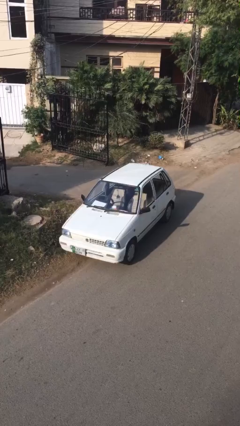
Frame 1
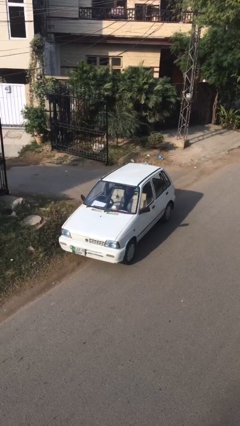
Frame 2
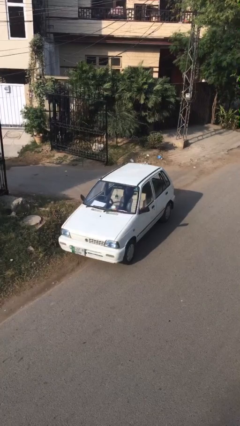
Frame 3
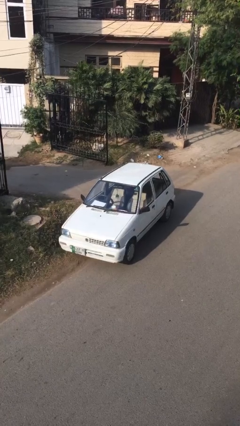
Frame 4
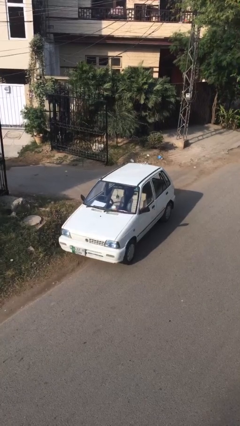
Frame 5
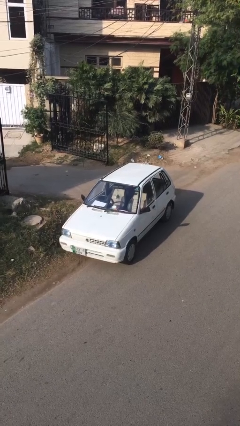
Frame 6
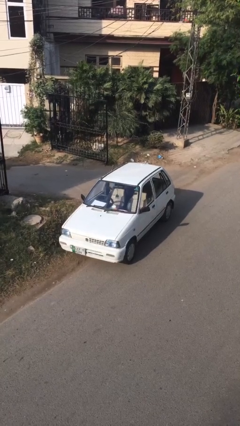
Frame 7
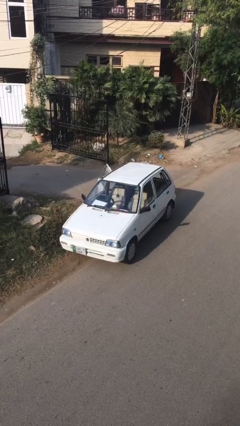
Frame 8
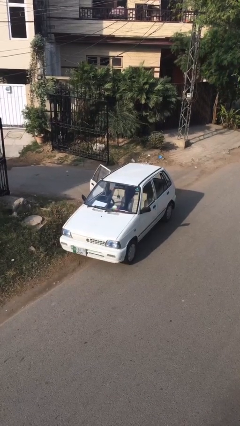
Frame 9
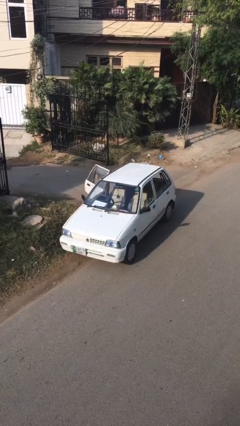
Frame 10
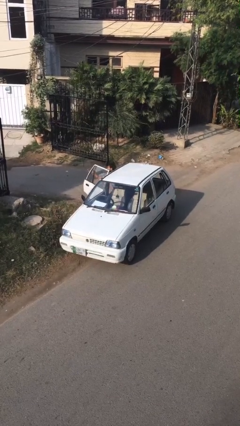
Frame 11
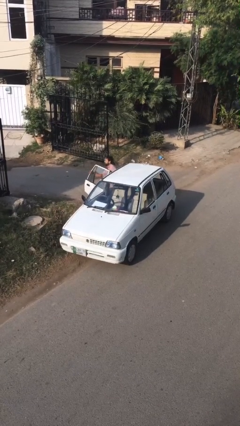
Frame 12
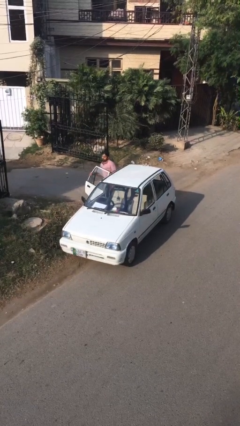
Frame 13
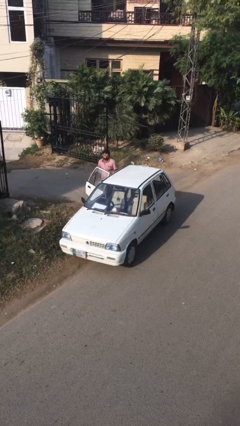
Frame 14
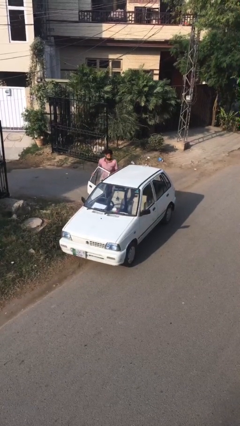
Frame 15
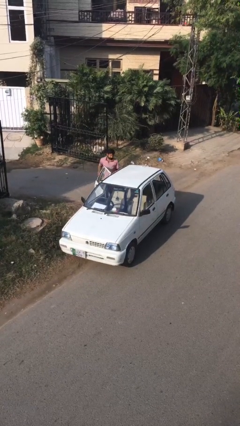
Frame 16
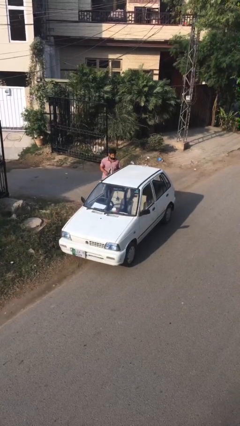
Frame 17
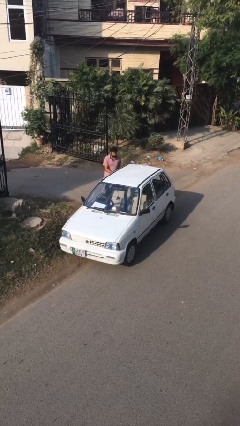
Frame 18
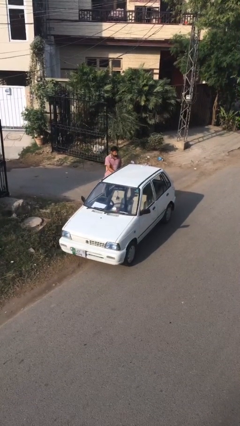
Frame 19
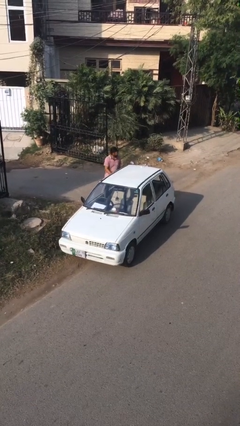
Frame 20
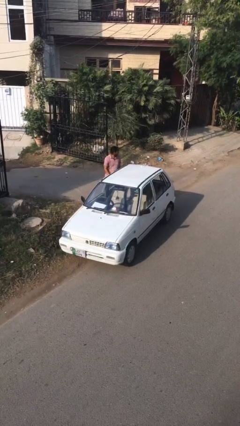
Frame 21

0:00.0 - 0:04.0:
car drops off person

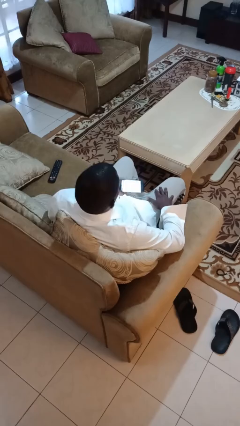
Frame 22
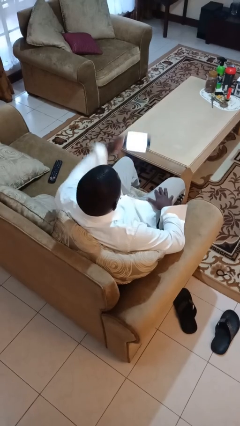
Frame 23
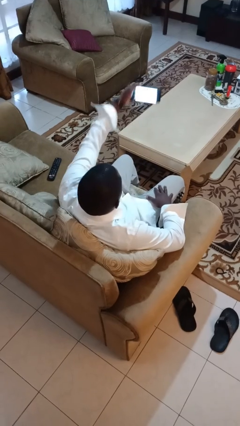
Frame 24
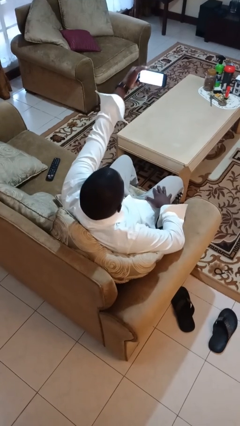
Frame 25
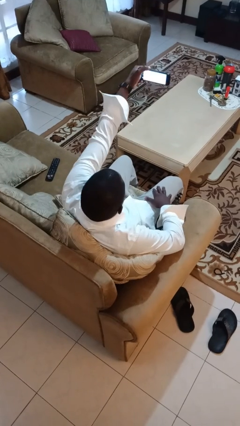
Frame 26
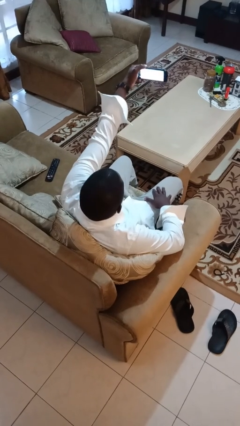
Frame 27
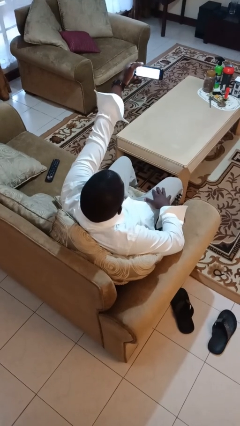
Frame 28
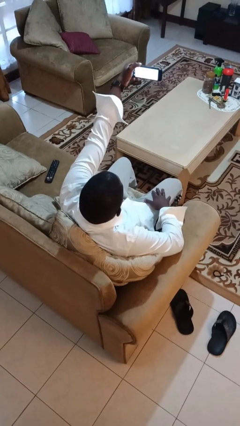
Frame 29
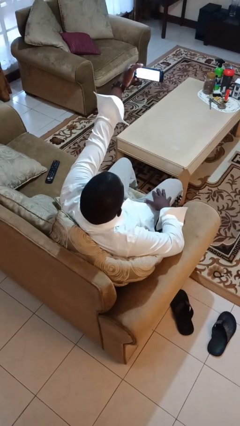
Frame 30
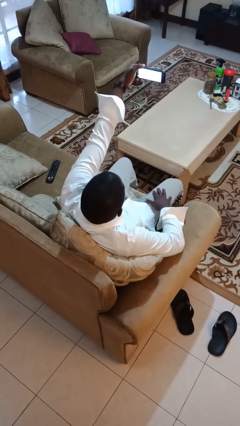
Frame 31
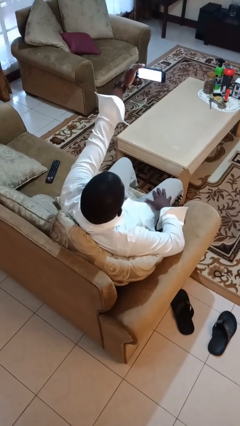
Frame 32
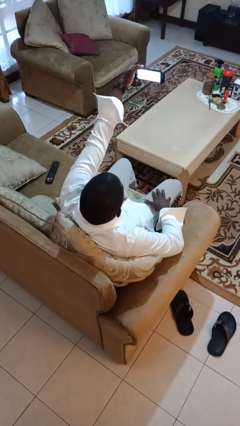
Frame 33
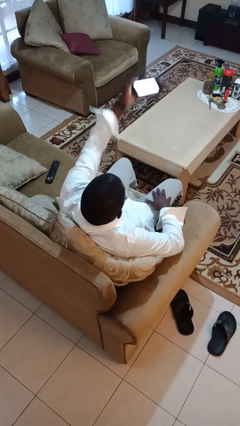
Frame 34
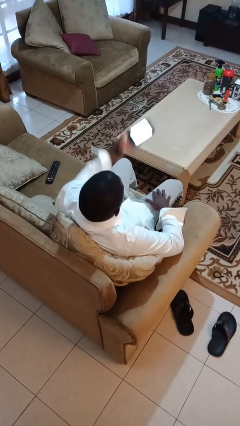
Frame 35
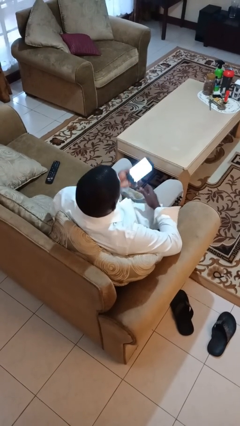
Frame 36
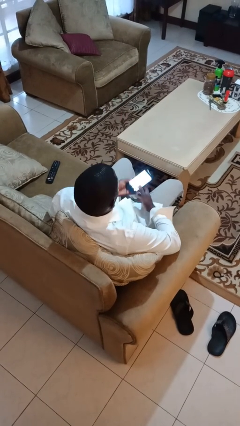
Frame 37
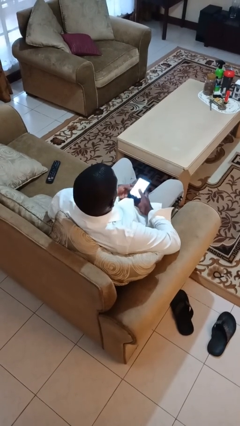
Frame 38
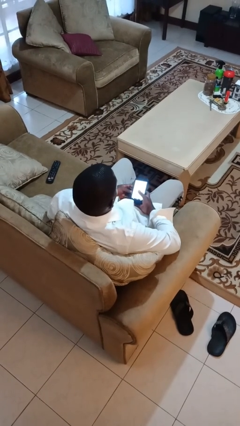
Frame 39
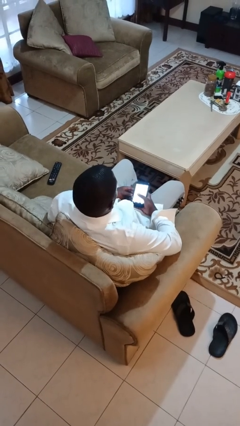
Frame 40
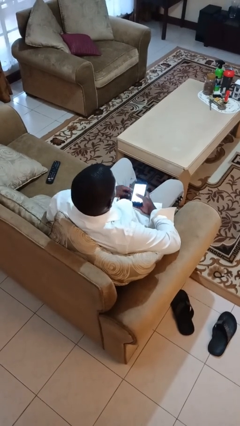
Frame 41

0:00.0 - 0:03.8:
person takes selfie

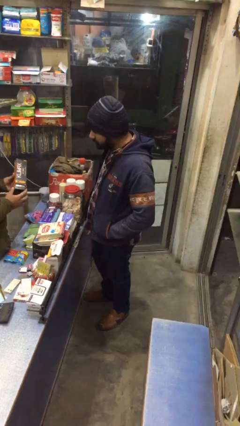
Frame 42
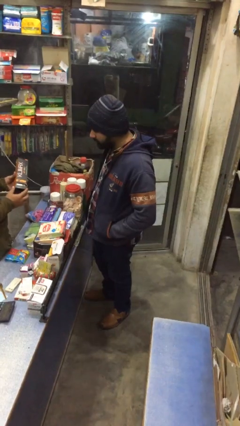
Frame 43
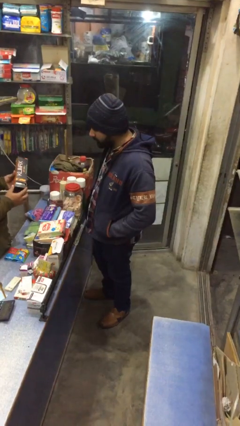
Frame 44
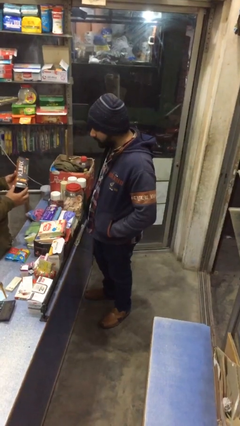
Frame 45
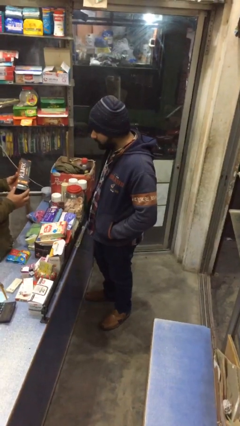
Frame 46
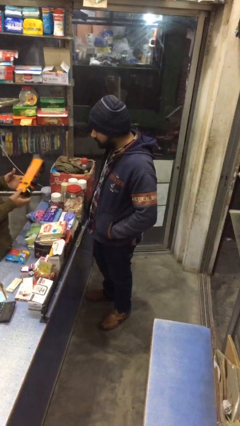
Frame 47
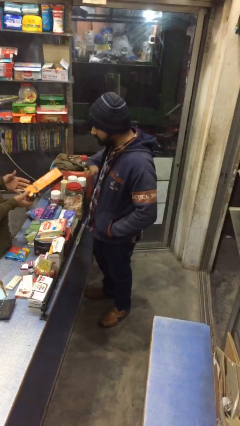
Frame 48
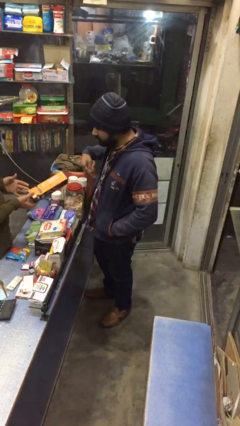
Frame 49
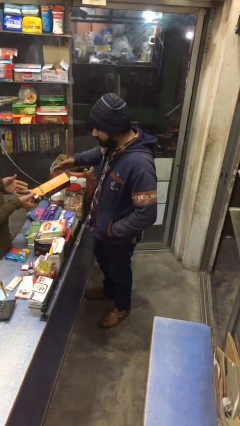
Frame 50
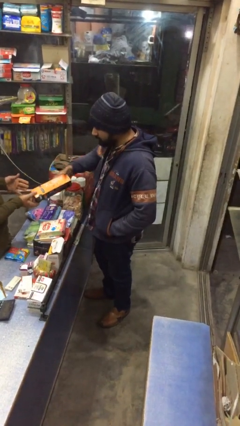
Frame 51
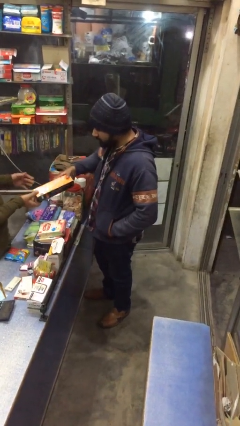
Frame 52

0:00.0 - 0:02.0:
person transfers object to person

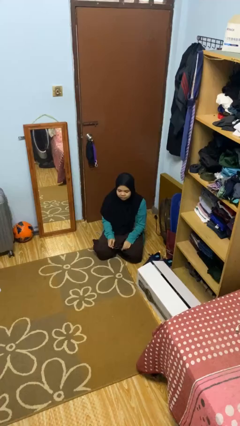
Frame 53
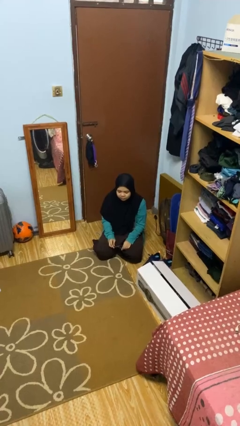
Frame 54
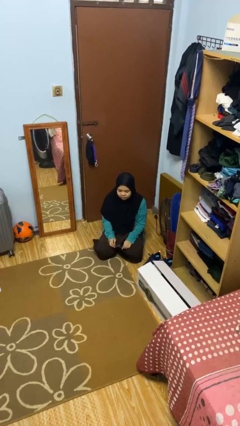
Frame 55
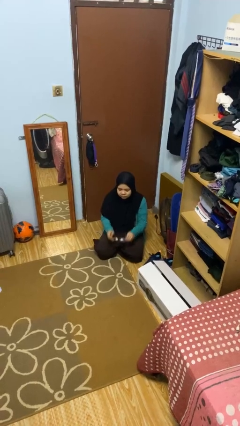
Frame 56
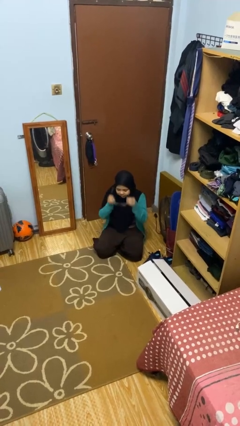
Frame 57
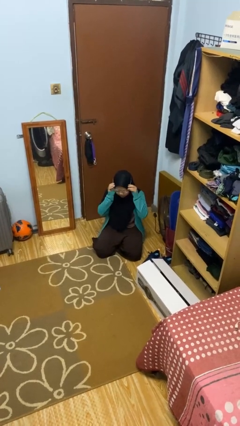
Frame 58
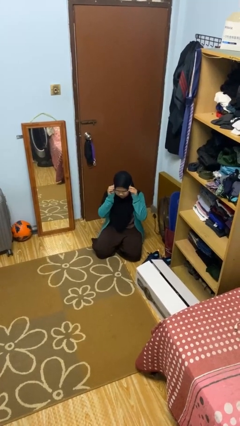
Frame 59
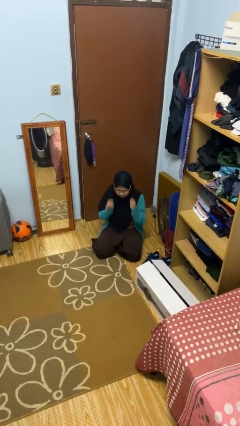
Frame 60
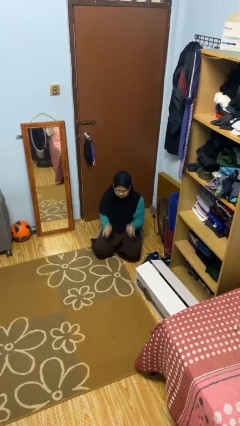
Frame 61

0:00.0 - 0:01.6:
person puts on glasses

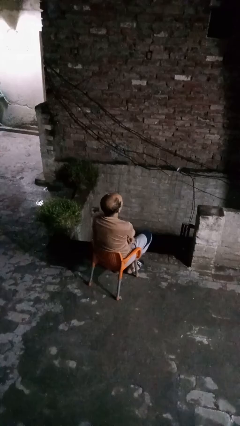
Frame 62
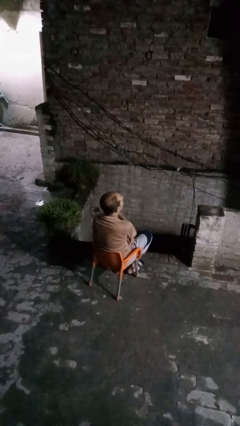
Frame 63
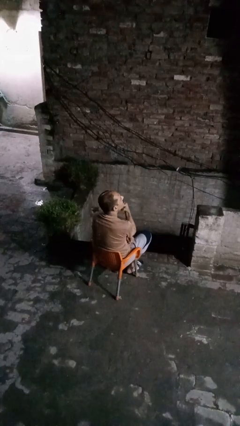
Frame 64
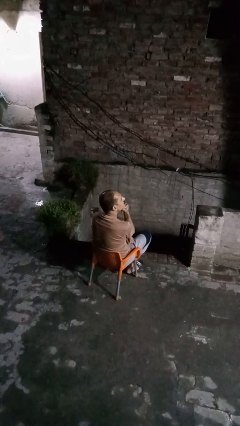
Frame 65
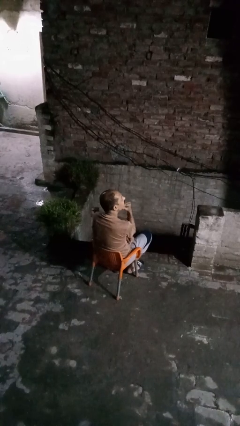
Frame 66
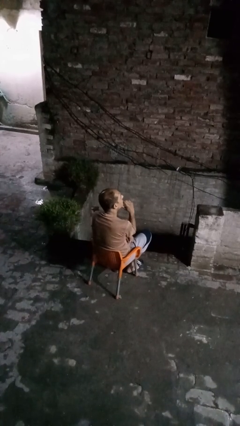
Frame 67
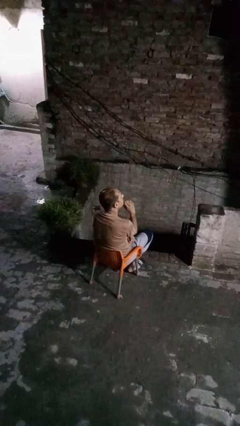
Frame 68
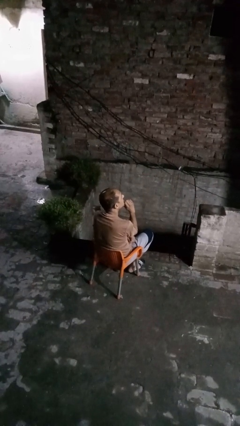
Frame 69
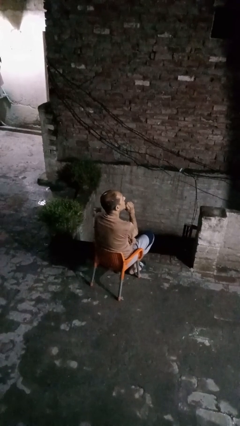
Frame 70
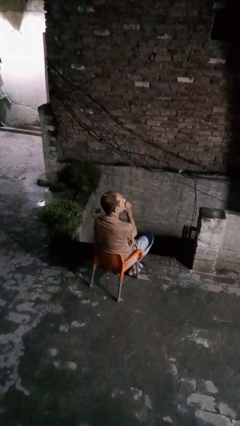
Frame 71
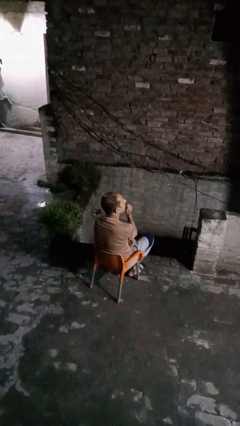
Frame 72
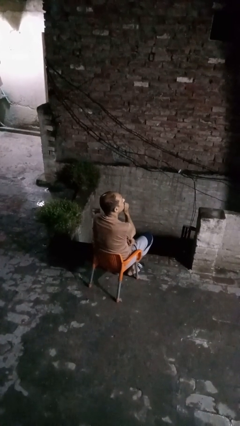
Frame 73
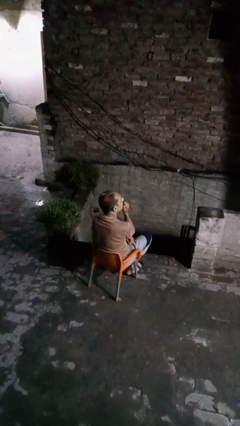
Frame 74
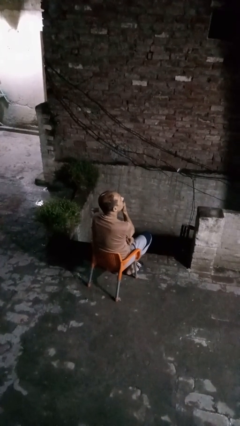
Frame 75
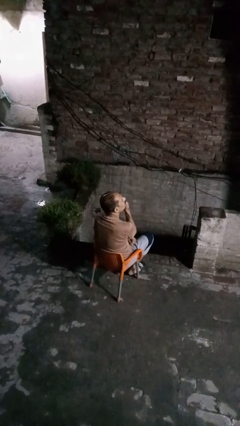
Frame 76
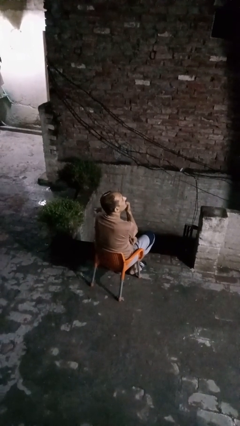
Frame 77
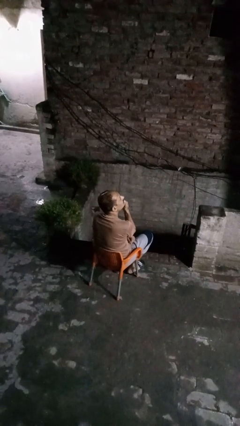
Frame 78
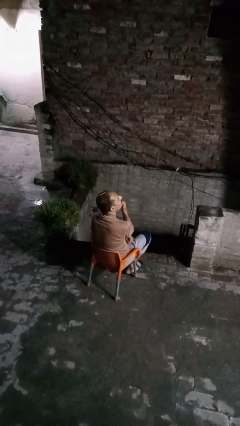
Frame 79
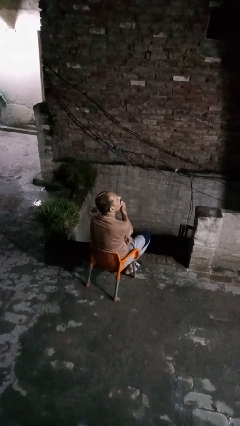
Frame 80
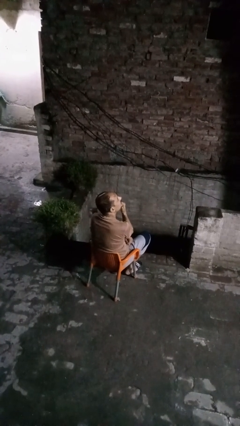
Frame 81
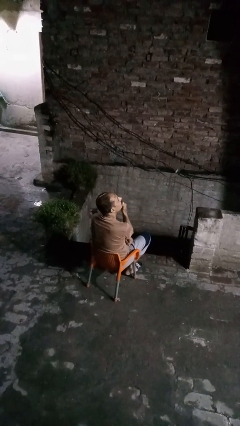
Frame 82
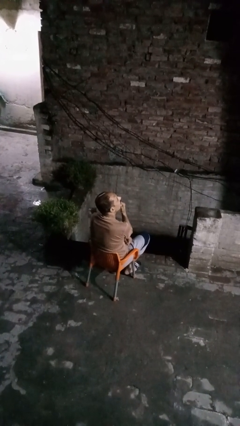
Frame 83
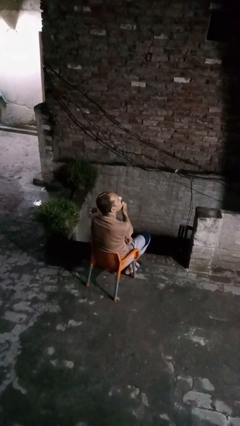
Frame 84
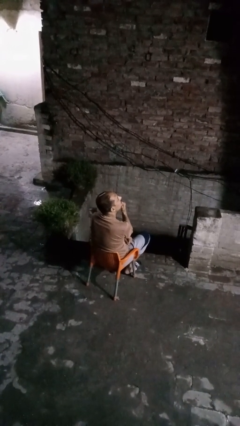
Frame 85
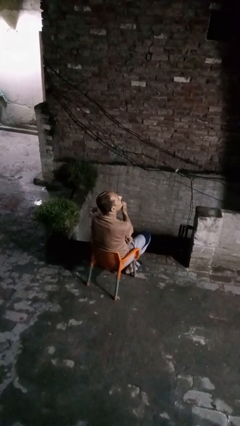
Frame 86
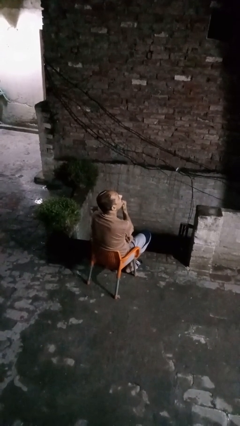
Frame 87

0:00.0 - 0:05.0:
person strokes chin

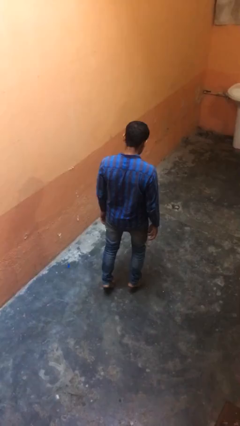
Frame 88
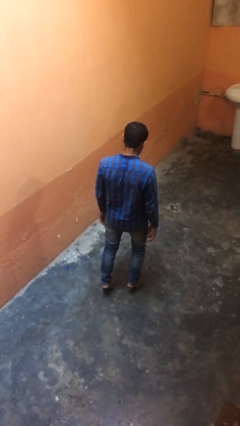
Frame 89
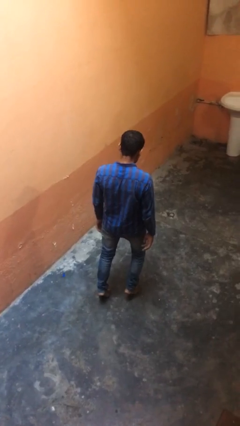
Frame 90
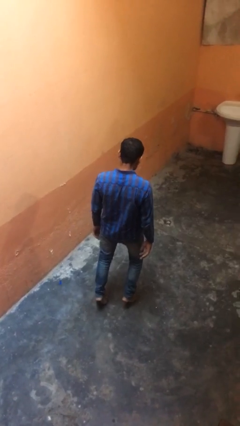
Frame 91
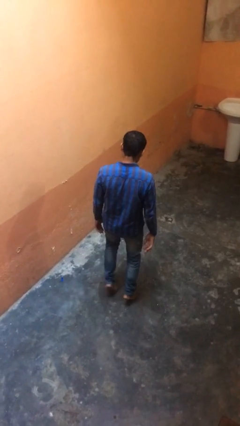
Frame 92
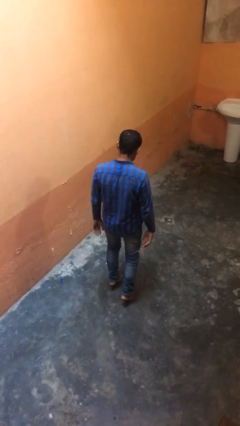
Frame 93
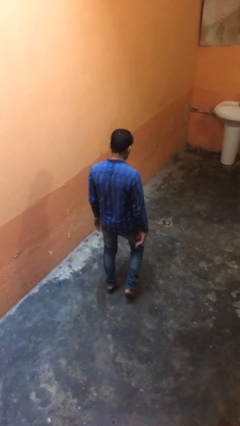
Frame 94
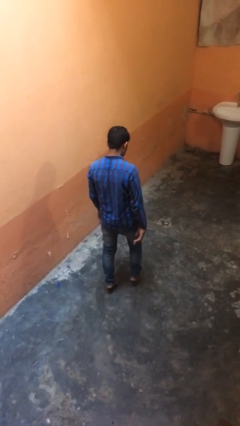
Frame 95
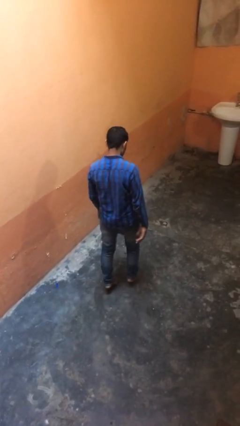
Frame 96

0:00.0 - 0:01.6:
person walks tiptoe
